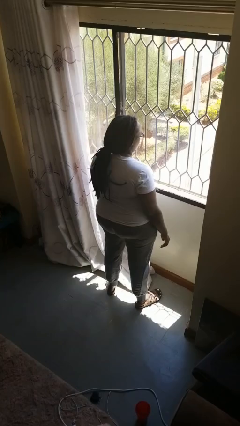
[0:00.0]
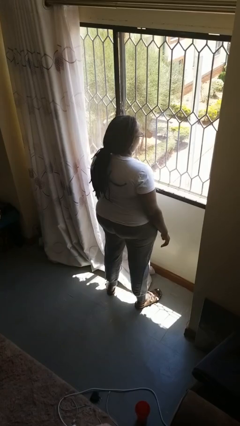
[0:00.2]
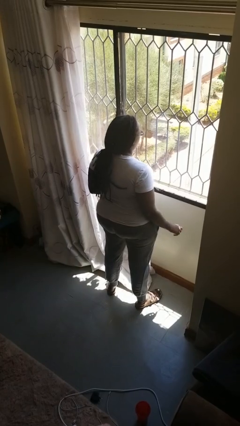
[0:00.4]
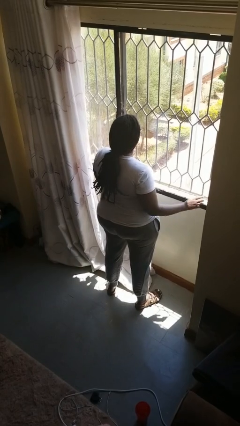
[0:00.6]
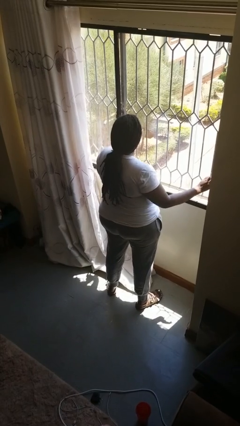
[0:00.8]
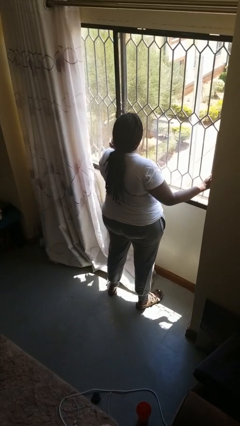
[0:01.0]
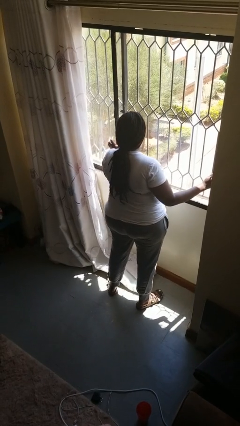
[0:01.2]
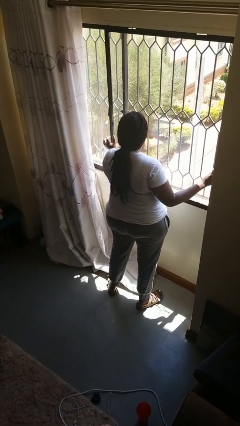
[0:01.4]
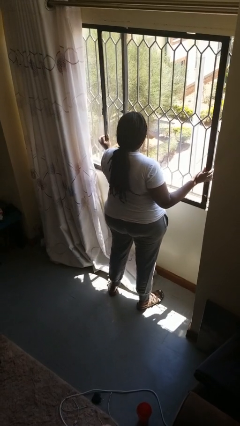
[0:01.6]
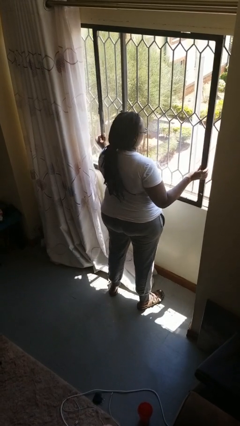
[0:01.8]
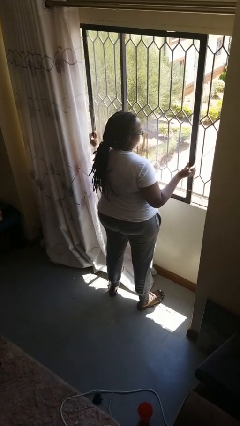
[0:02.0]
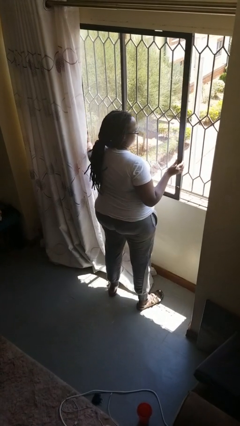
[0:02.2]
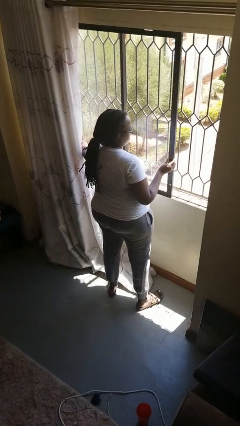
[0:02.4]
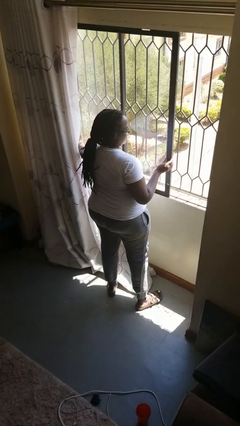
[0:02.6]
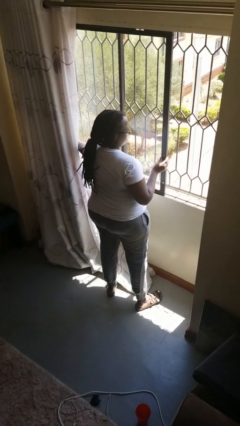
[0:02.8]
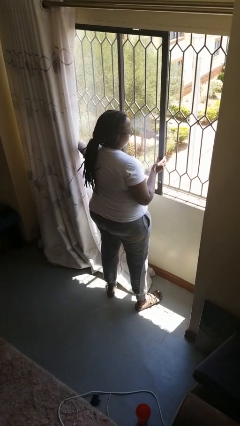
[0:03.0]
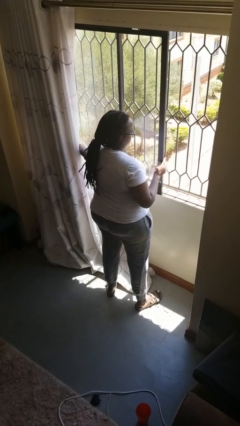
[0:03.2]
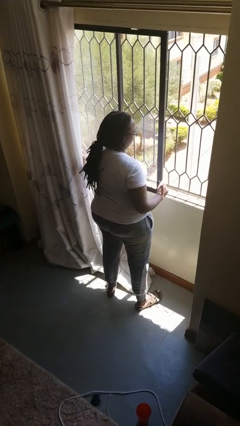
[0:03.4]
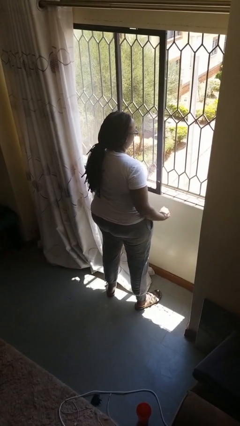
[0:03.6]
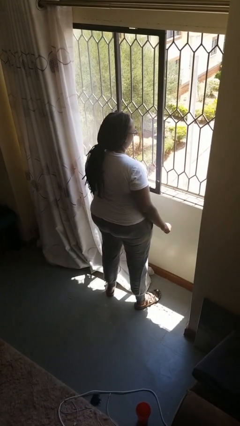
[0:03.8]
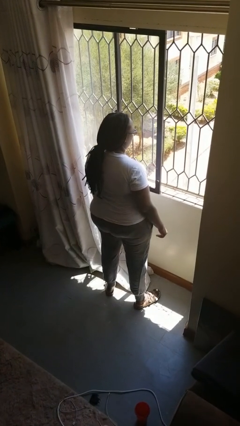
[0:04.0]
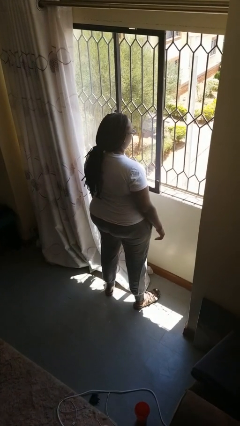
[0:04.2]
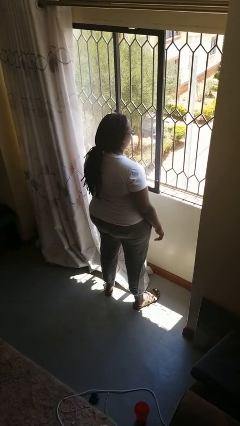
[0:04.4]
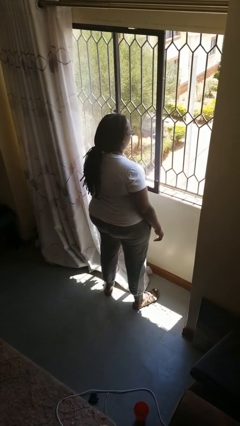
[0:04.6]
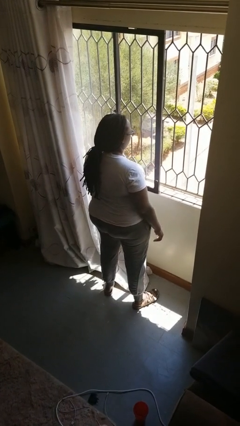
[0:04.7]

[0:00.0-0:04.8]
person opens home window

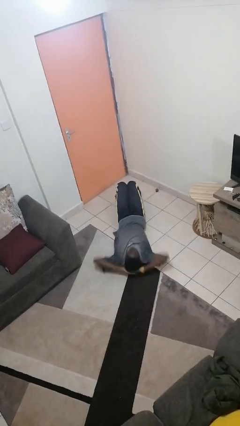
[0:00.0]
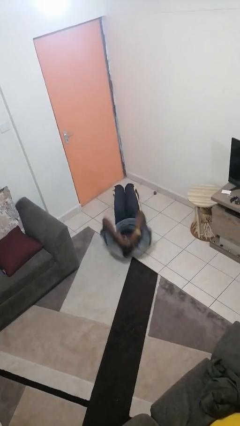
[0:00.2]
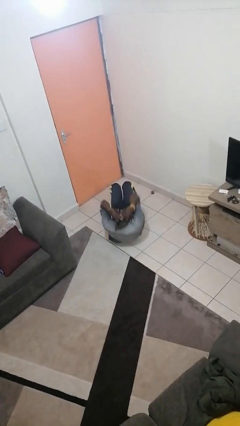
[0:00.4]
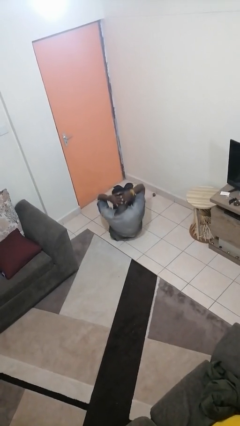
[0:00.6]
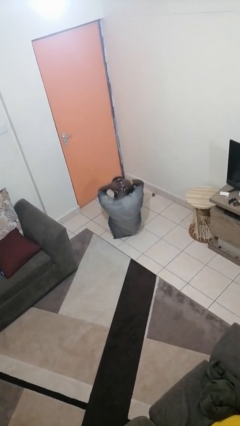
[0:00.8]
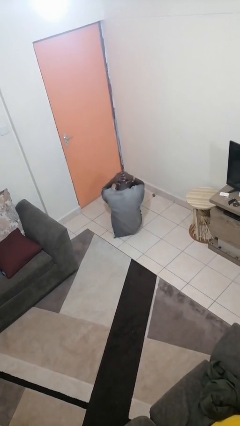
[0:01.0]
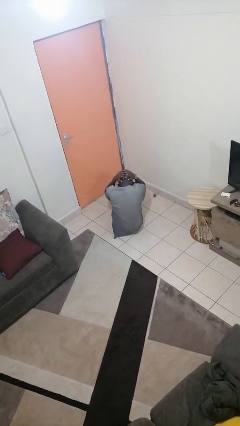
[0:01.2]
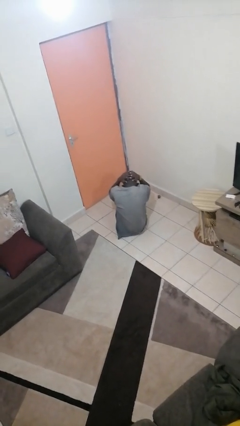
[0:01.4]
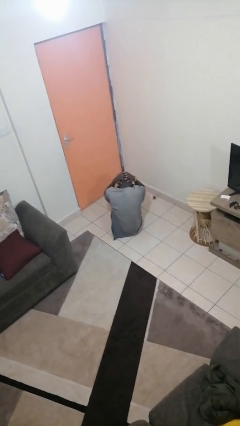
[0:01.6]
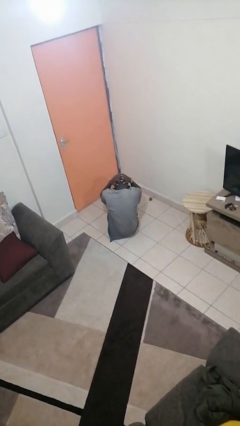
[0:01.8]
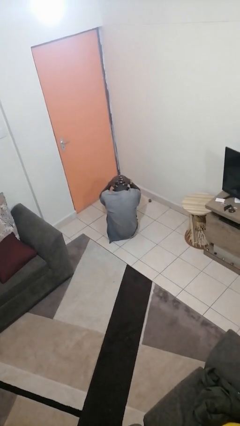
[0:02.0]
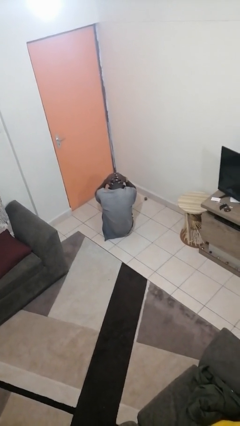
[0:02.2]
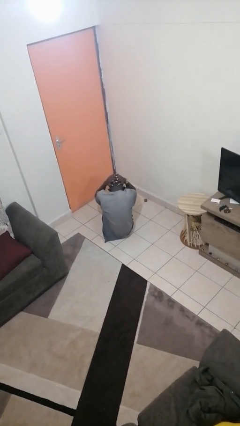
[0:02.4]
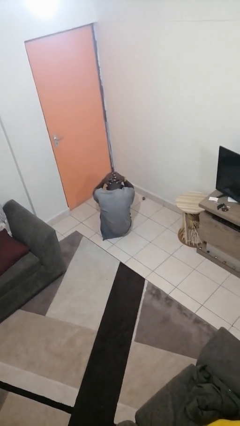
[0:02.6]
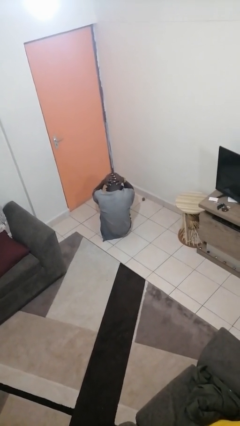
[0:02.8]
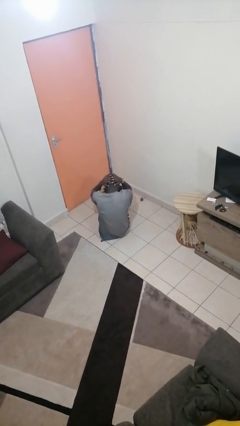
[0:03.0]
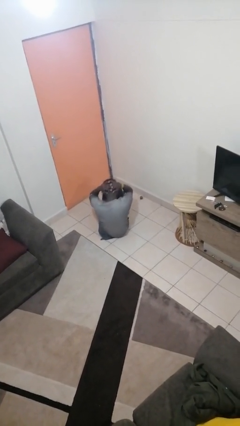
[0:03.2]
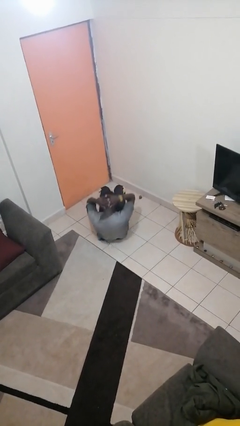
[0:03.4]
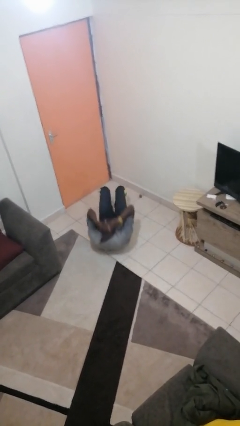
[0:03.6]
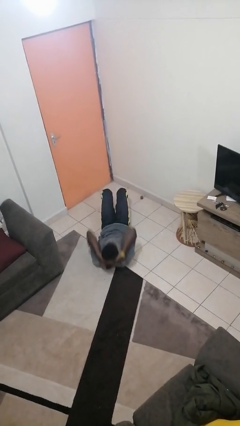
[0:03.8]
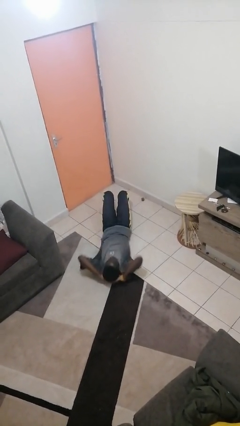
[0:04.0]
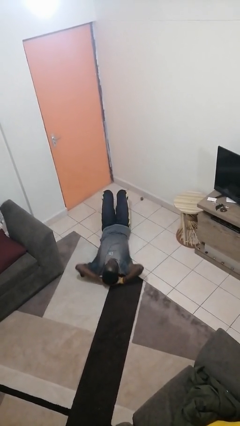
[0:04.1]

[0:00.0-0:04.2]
person exercises with situp

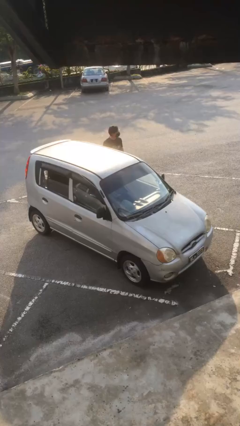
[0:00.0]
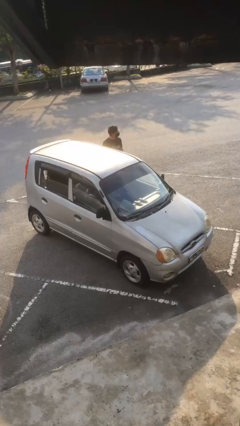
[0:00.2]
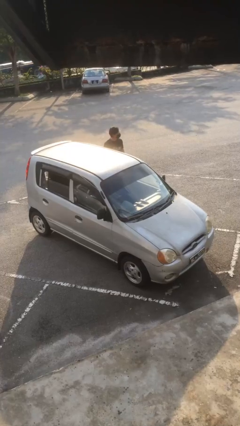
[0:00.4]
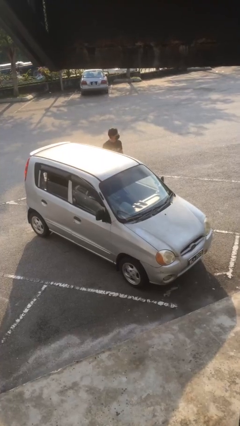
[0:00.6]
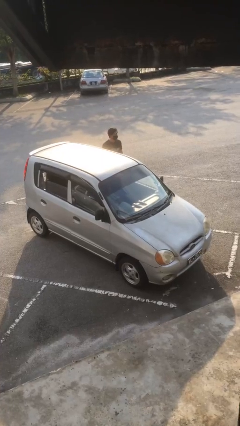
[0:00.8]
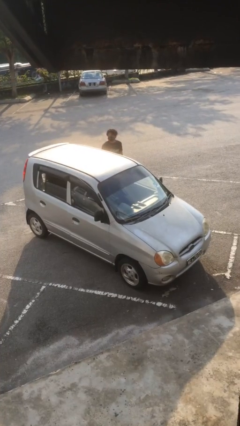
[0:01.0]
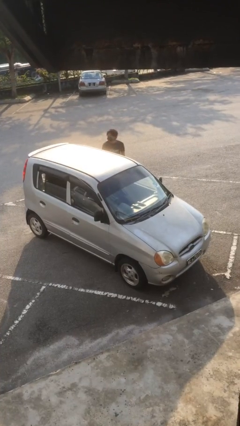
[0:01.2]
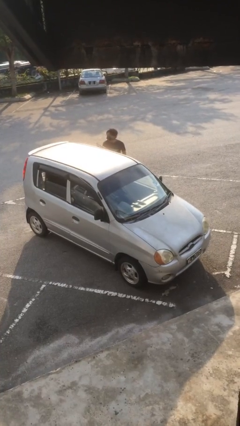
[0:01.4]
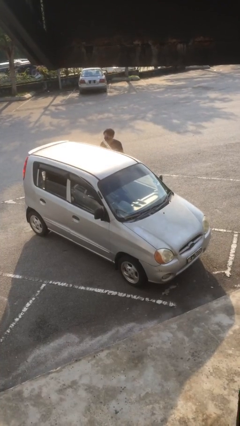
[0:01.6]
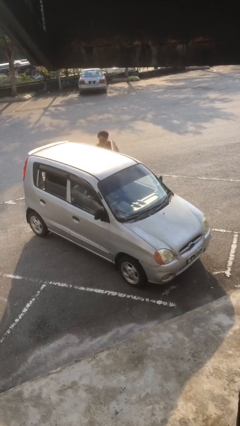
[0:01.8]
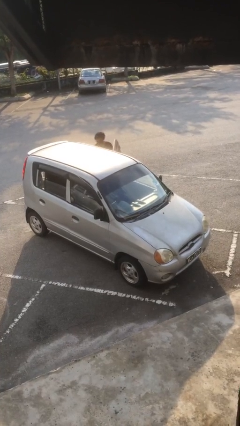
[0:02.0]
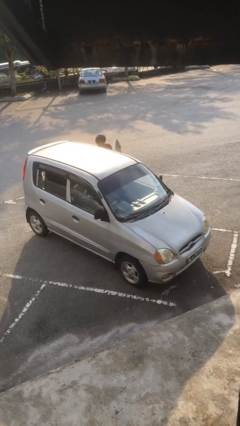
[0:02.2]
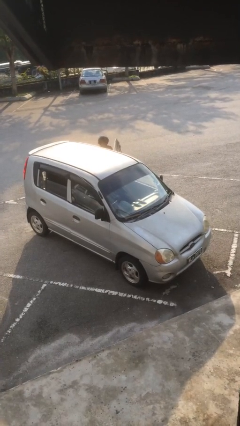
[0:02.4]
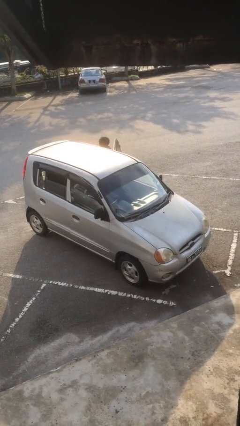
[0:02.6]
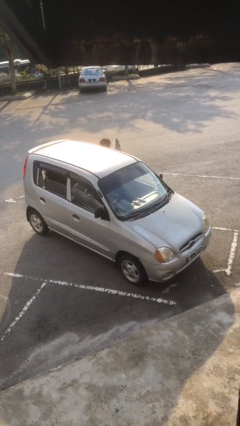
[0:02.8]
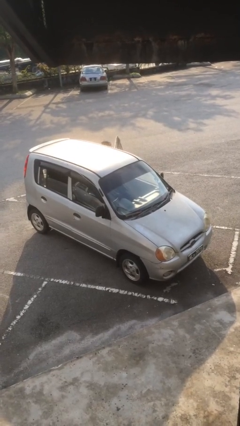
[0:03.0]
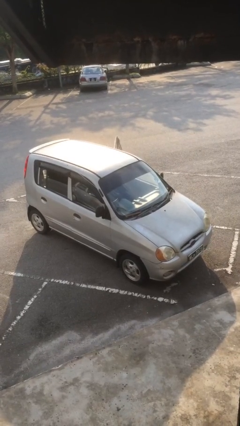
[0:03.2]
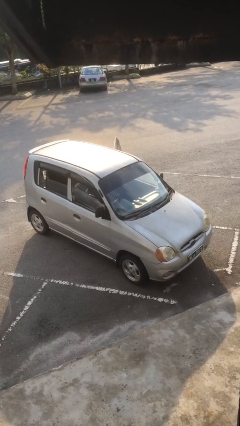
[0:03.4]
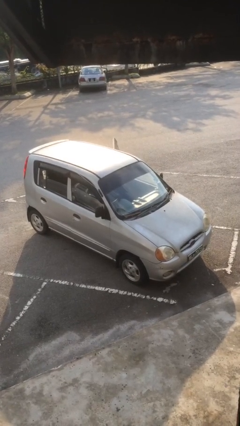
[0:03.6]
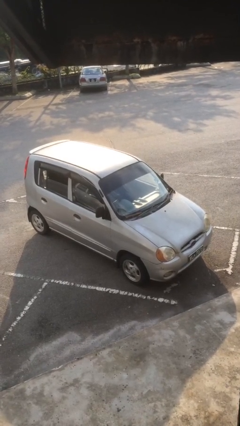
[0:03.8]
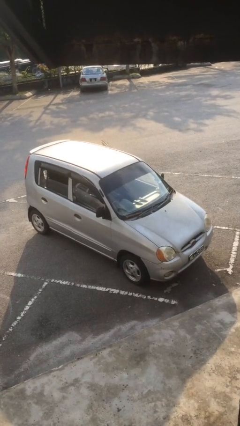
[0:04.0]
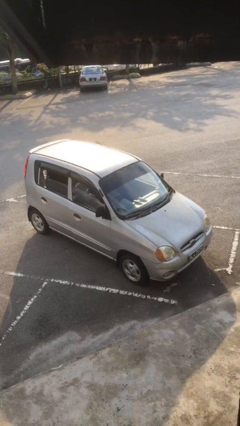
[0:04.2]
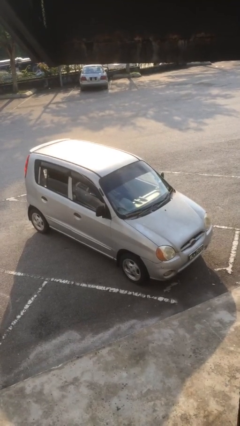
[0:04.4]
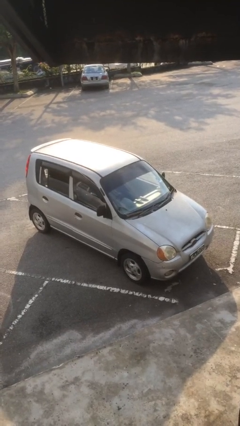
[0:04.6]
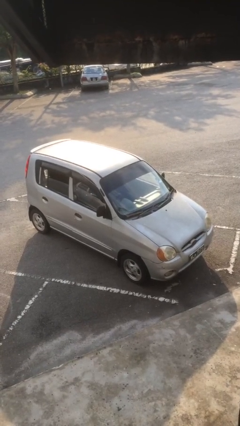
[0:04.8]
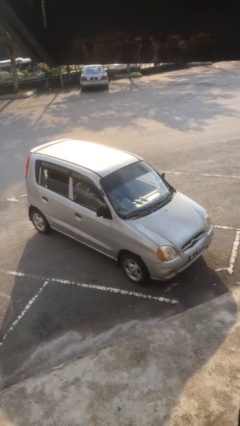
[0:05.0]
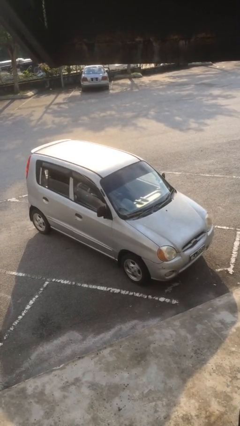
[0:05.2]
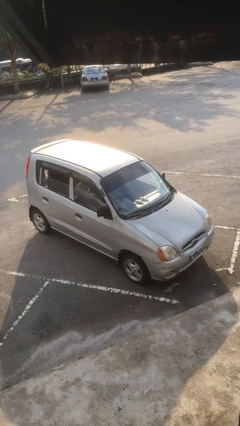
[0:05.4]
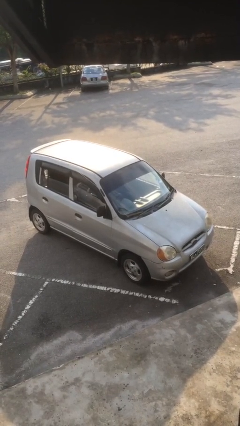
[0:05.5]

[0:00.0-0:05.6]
car picks up person

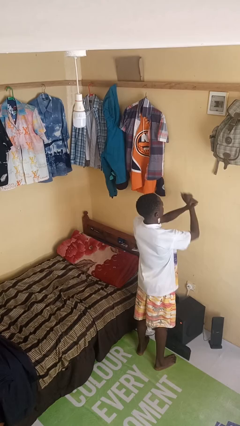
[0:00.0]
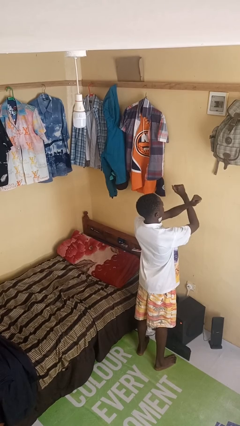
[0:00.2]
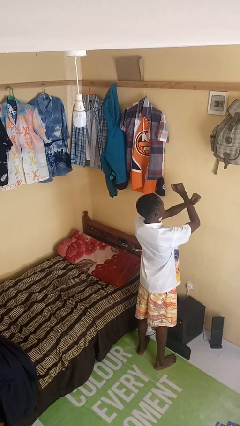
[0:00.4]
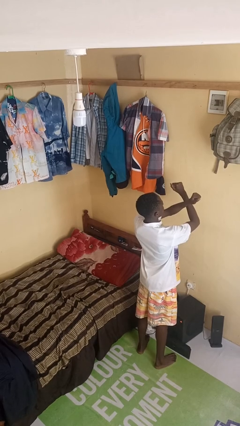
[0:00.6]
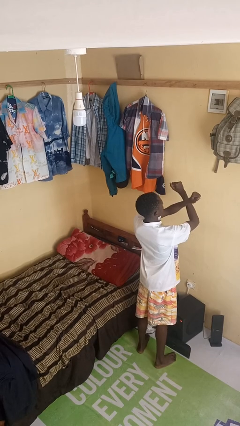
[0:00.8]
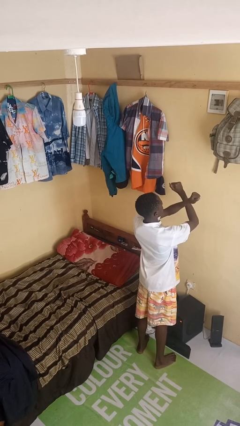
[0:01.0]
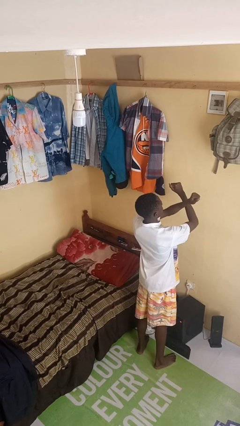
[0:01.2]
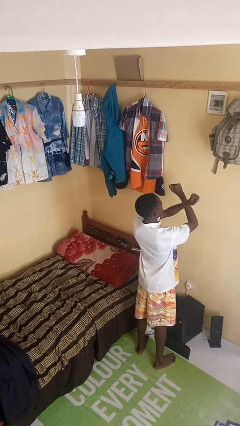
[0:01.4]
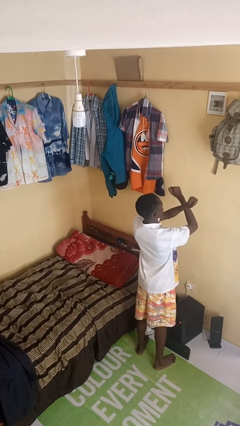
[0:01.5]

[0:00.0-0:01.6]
person gestures arms x

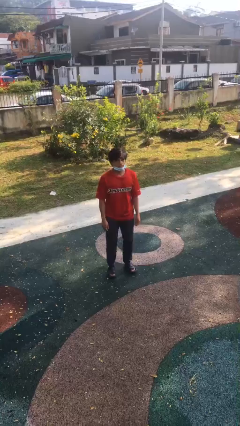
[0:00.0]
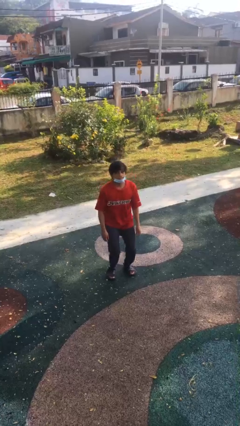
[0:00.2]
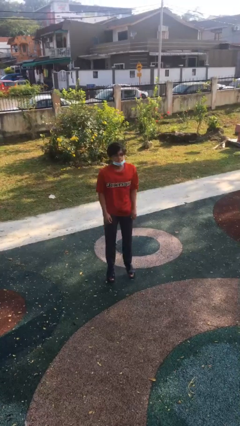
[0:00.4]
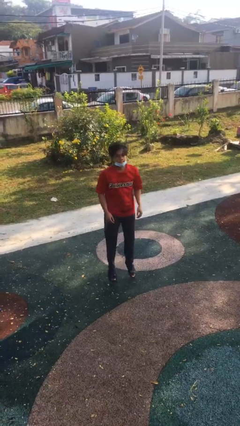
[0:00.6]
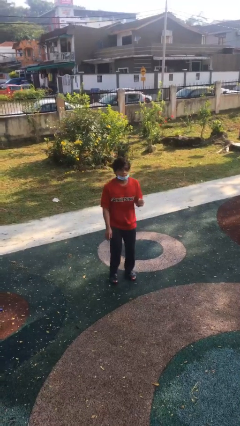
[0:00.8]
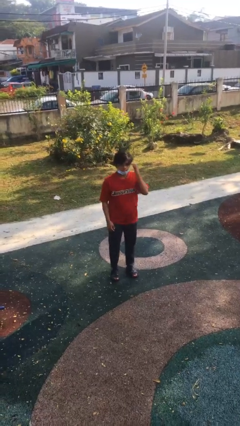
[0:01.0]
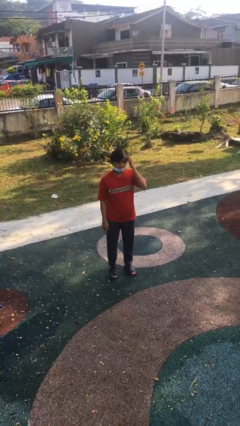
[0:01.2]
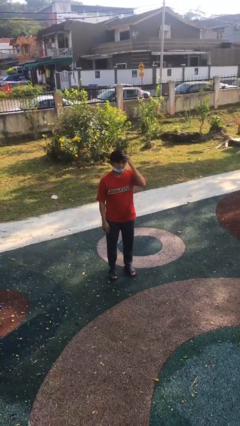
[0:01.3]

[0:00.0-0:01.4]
person jumps
